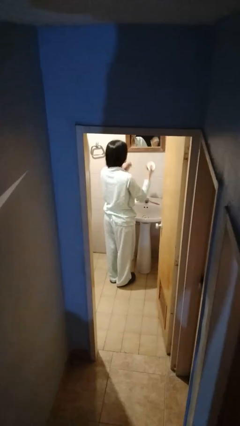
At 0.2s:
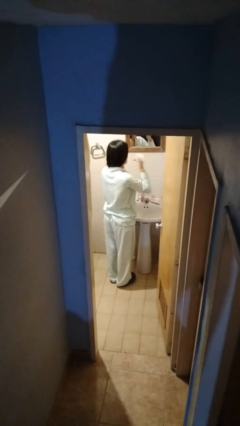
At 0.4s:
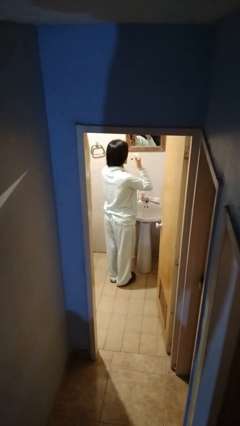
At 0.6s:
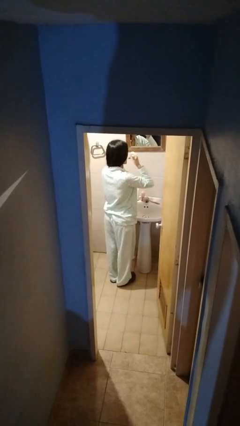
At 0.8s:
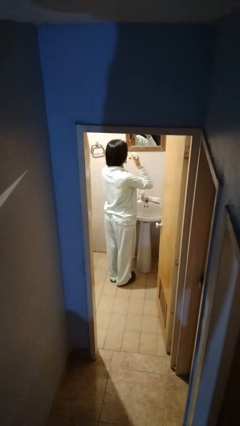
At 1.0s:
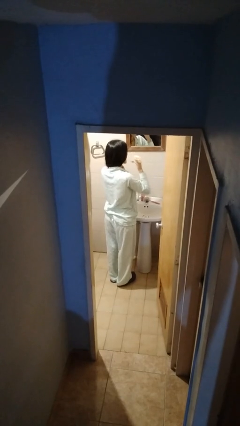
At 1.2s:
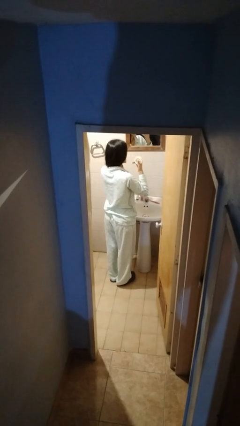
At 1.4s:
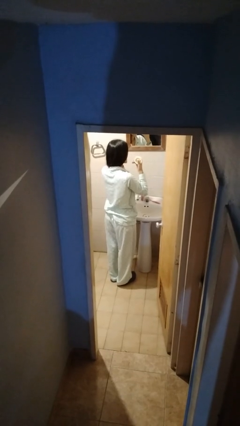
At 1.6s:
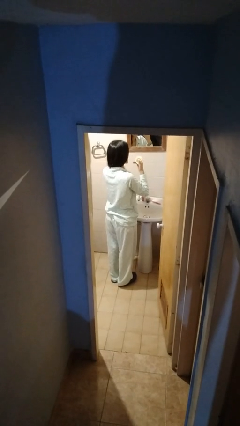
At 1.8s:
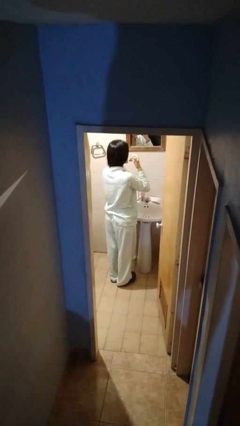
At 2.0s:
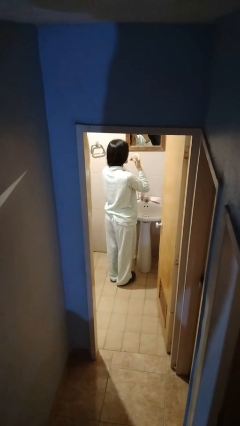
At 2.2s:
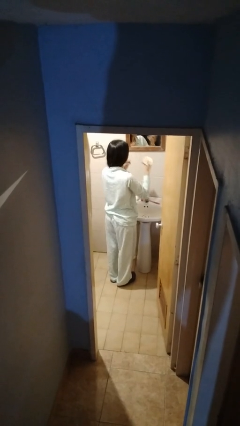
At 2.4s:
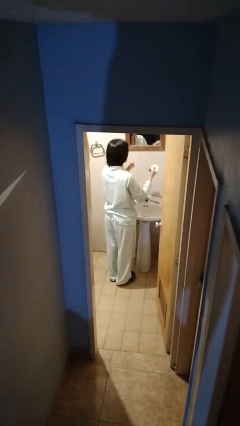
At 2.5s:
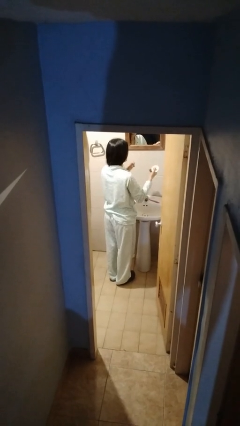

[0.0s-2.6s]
person flosses

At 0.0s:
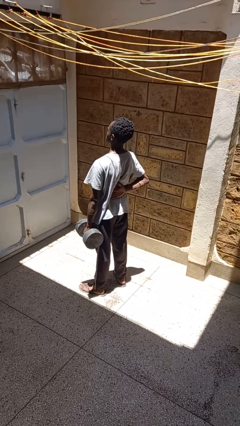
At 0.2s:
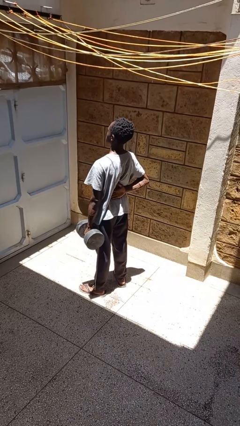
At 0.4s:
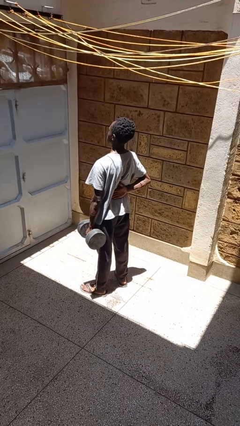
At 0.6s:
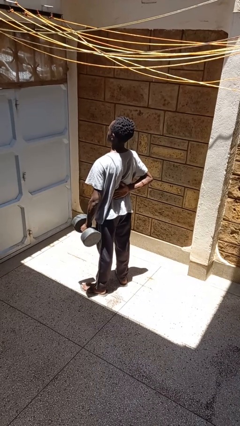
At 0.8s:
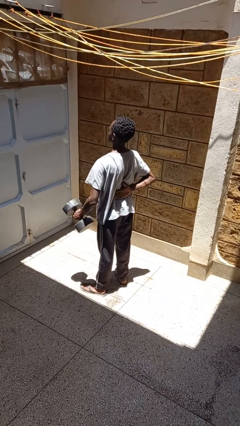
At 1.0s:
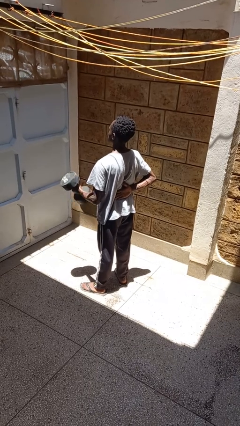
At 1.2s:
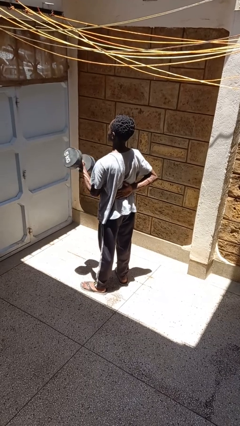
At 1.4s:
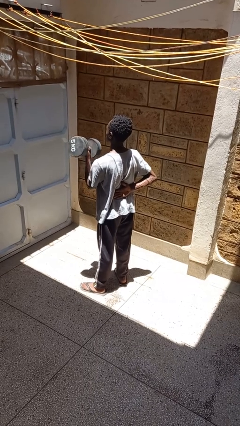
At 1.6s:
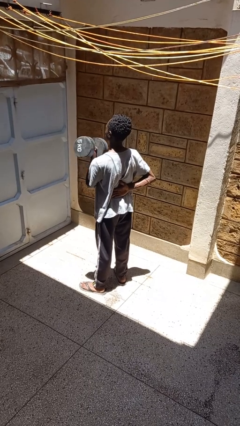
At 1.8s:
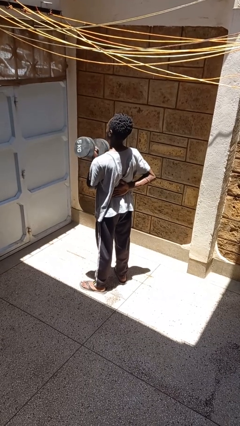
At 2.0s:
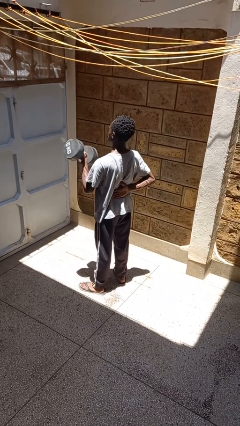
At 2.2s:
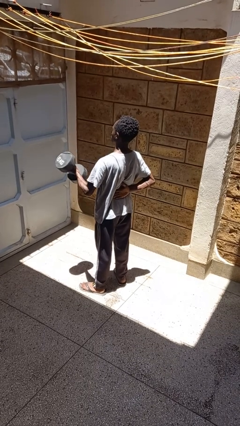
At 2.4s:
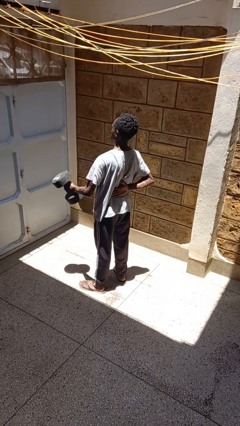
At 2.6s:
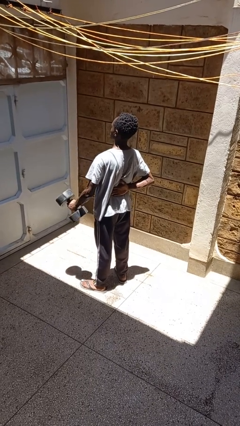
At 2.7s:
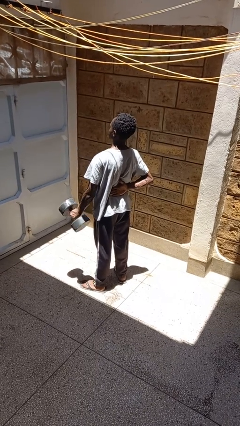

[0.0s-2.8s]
person lifts dumbbells

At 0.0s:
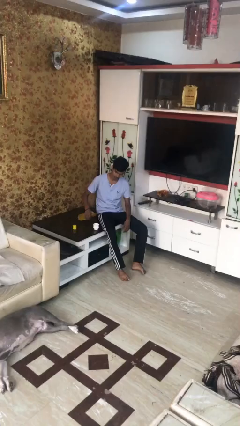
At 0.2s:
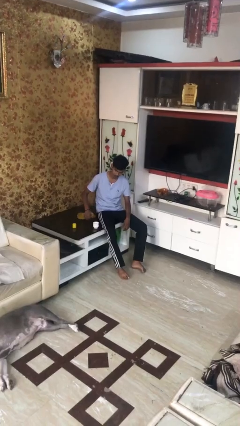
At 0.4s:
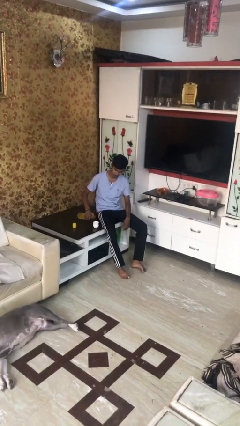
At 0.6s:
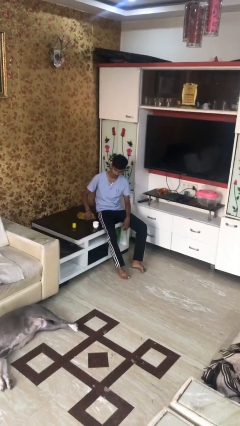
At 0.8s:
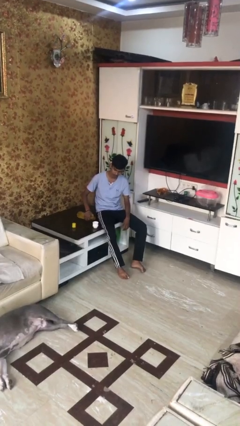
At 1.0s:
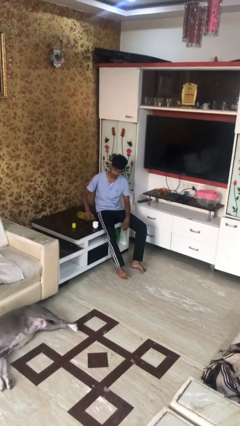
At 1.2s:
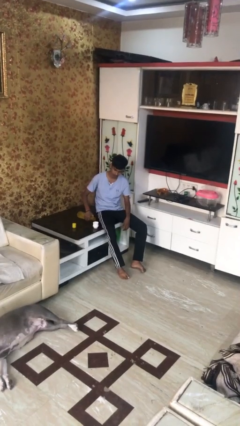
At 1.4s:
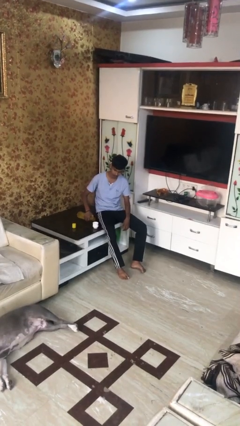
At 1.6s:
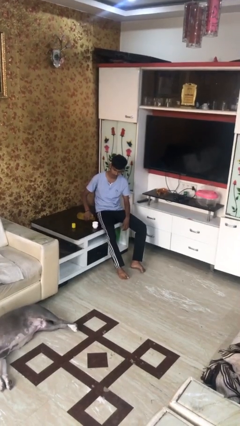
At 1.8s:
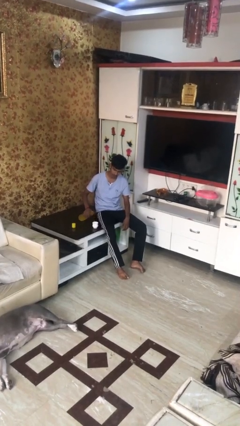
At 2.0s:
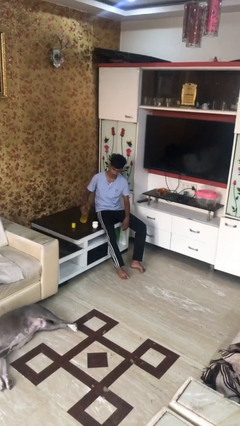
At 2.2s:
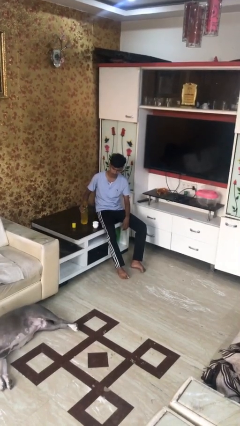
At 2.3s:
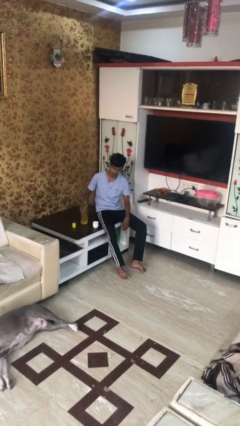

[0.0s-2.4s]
person pours liquid into cup

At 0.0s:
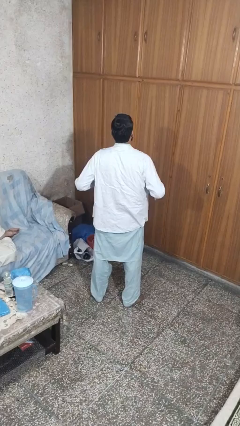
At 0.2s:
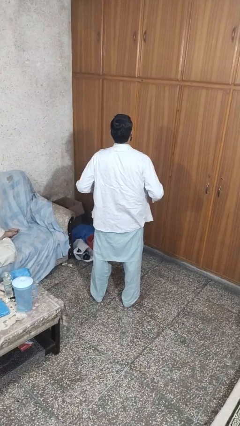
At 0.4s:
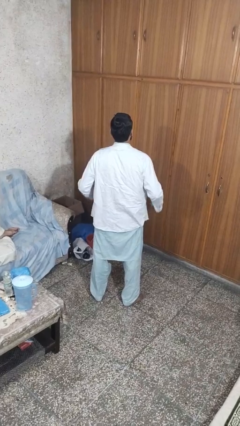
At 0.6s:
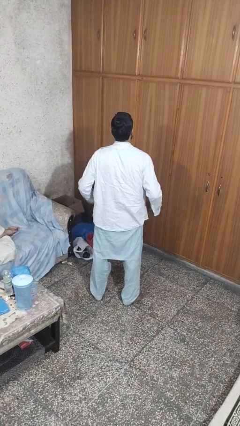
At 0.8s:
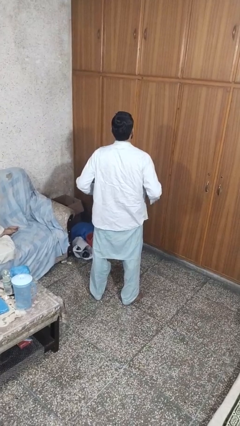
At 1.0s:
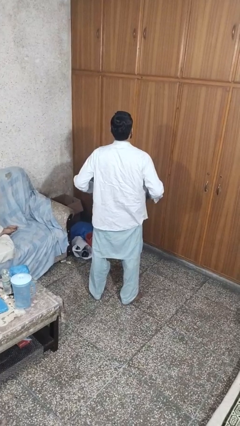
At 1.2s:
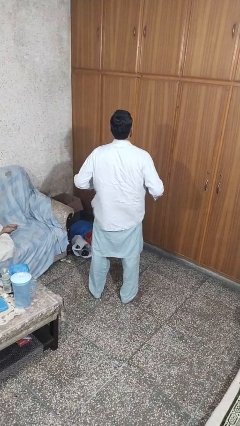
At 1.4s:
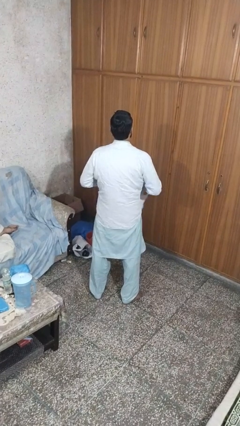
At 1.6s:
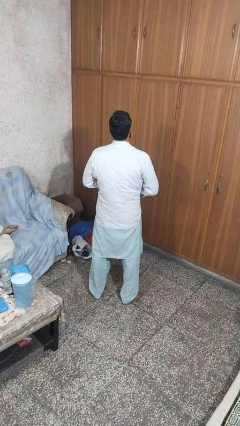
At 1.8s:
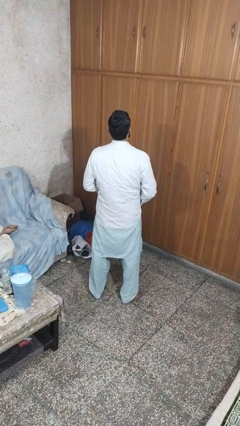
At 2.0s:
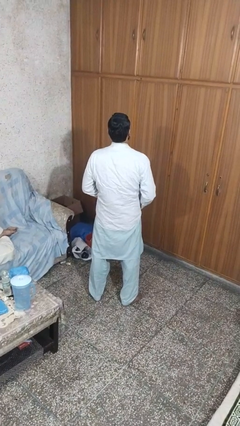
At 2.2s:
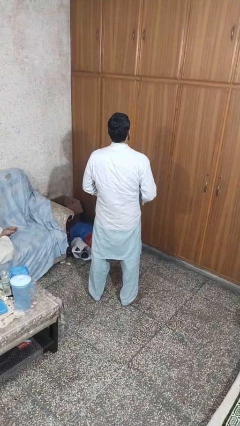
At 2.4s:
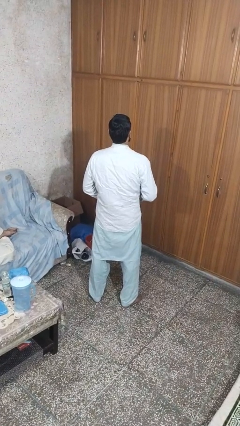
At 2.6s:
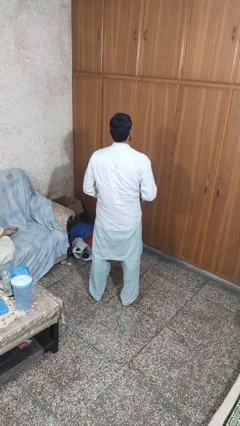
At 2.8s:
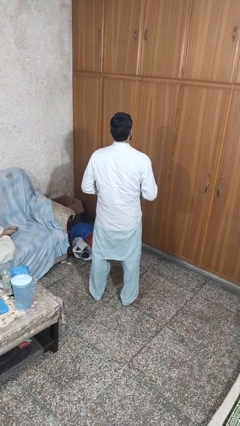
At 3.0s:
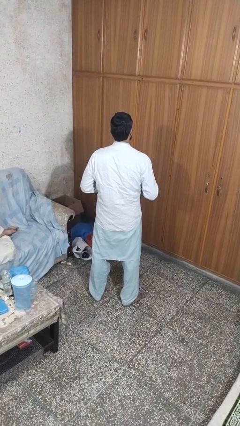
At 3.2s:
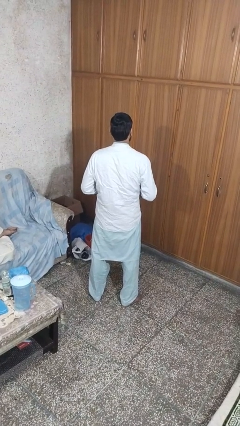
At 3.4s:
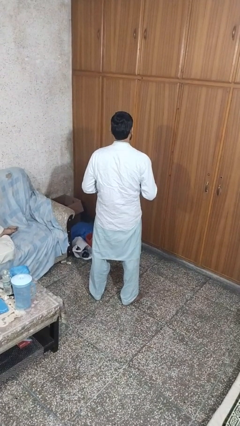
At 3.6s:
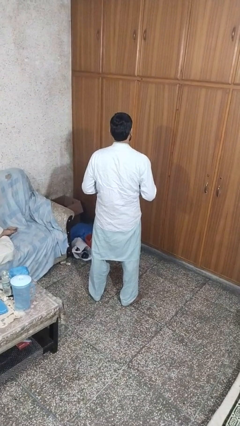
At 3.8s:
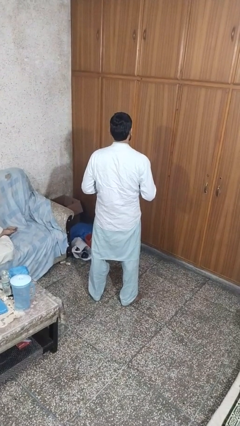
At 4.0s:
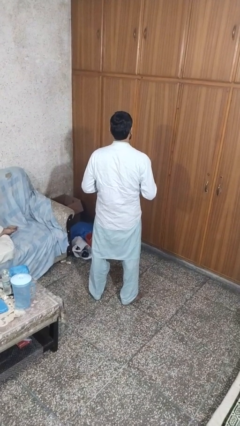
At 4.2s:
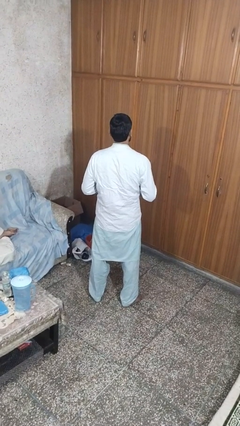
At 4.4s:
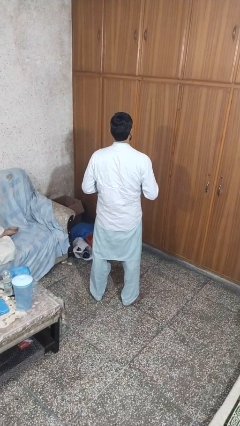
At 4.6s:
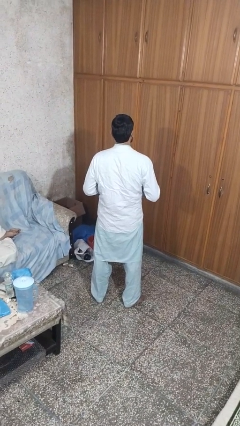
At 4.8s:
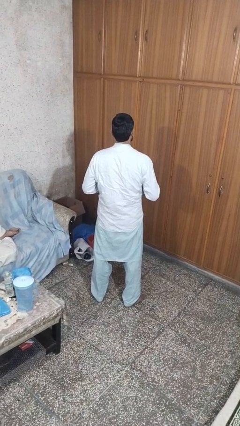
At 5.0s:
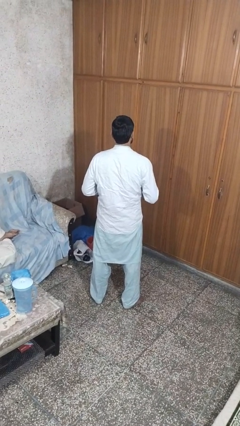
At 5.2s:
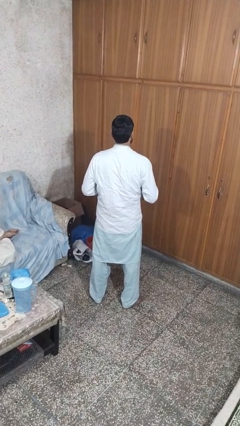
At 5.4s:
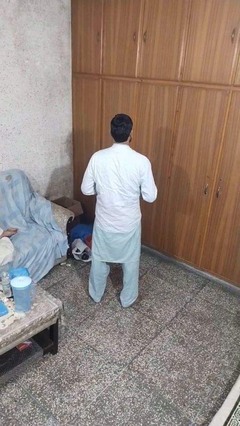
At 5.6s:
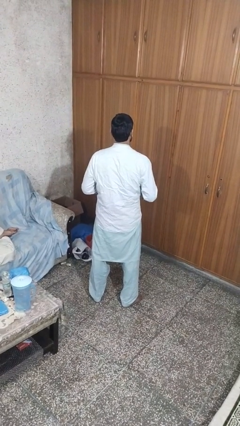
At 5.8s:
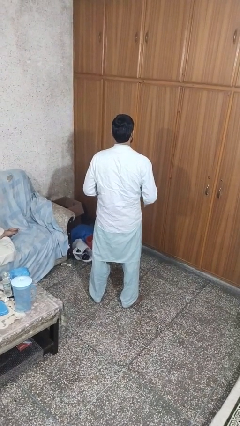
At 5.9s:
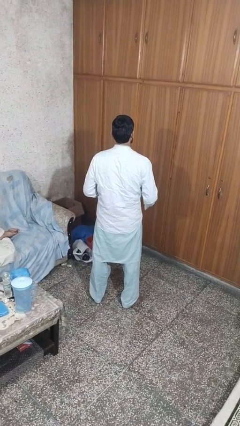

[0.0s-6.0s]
person buttons shirt

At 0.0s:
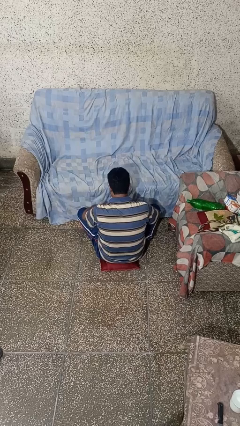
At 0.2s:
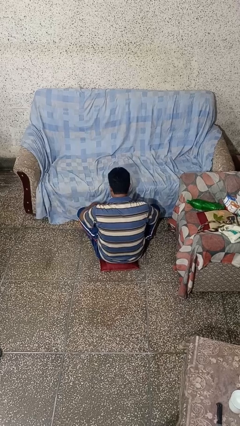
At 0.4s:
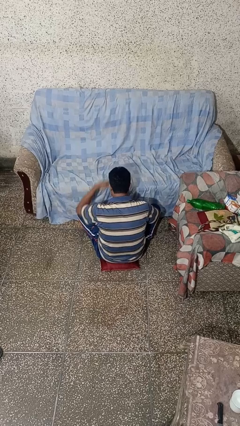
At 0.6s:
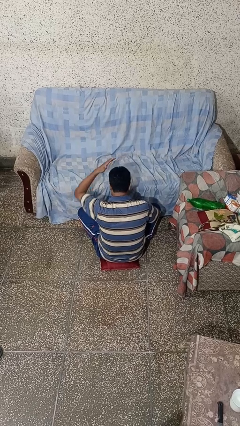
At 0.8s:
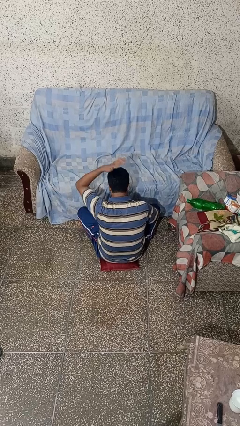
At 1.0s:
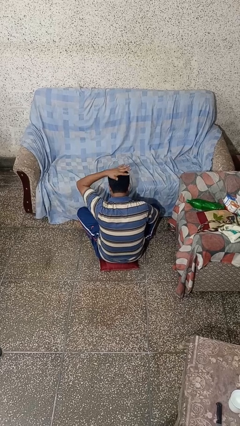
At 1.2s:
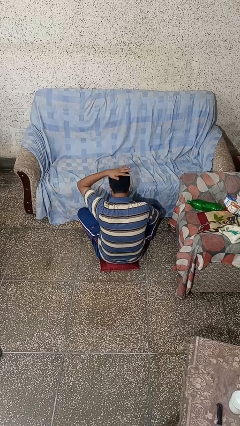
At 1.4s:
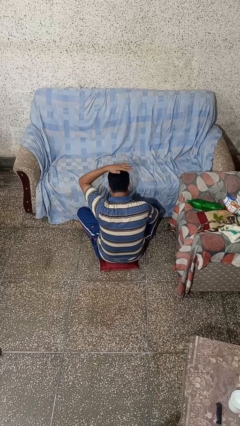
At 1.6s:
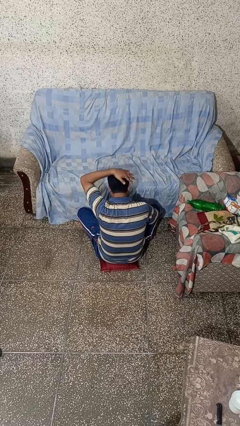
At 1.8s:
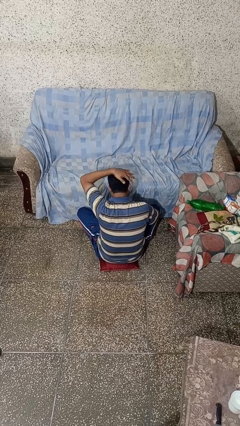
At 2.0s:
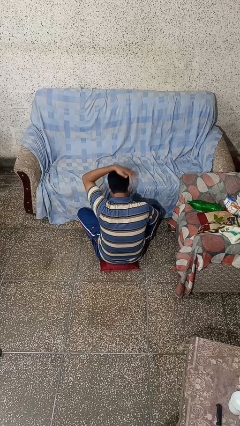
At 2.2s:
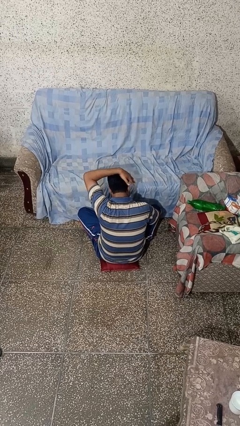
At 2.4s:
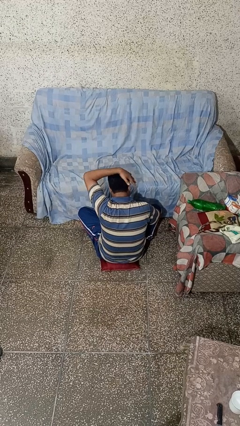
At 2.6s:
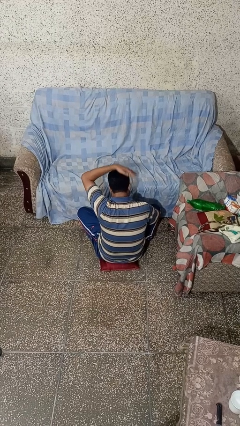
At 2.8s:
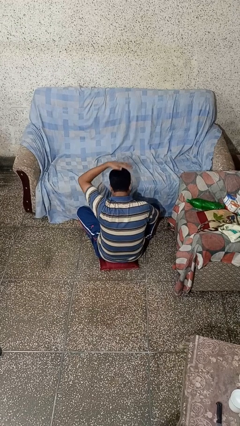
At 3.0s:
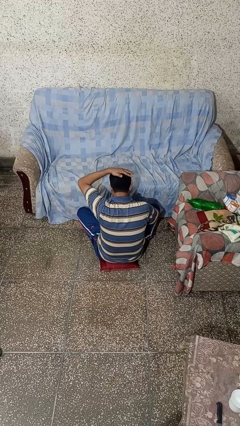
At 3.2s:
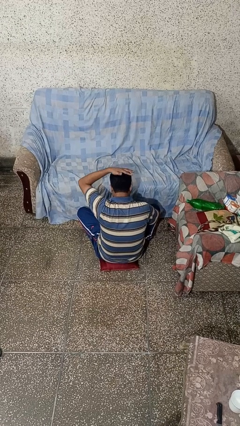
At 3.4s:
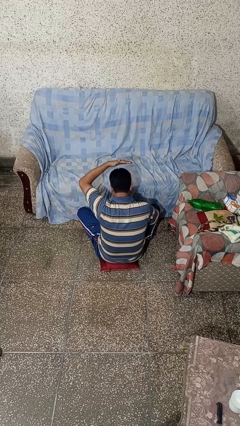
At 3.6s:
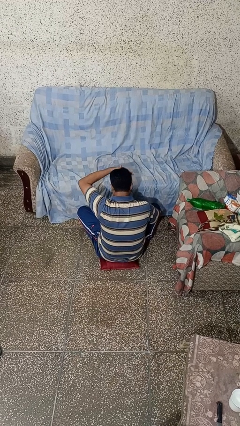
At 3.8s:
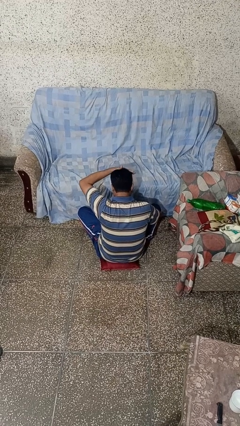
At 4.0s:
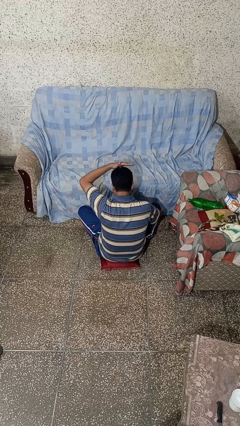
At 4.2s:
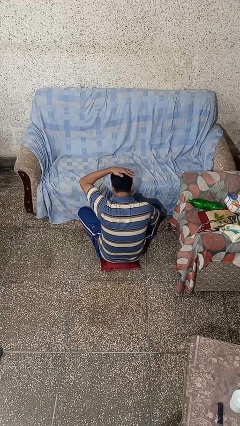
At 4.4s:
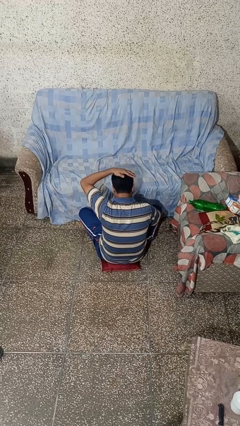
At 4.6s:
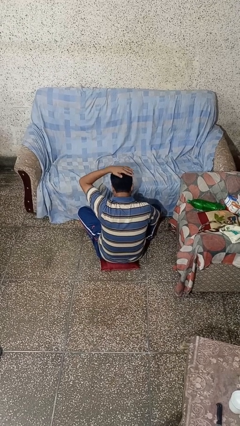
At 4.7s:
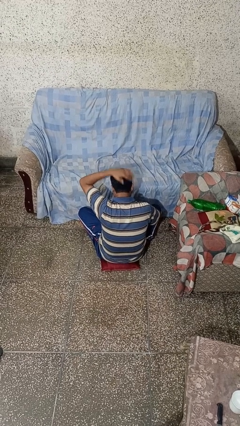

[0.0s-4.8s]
person pats head
